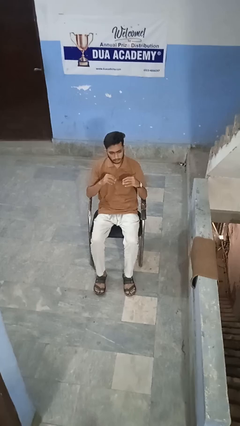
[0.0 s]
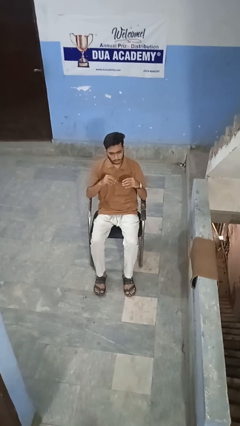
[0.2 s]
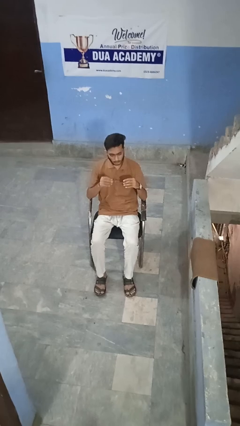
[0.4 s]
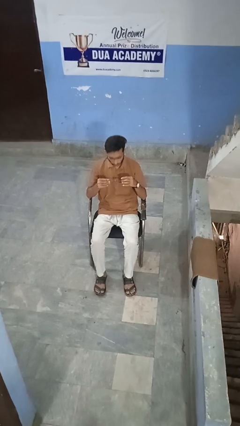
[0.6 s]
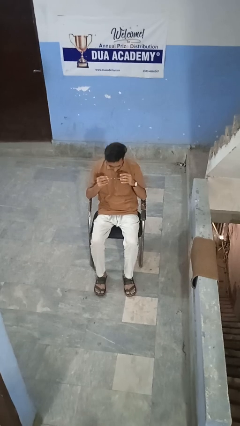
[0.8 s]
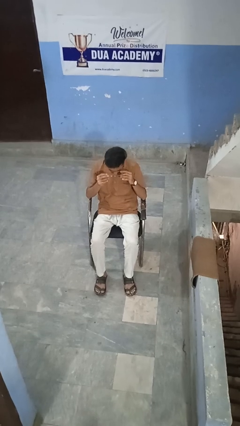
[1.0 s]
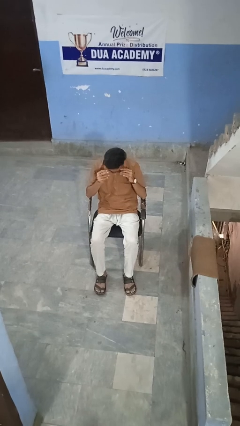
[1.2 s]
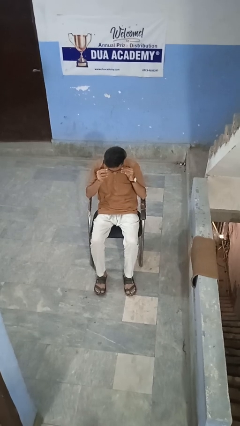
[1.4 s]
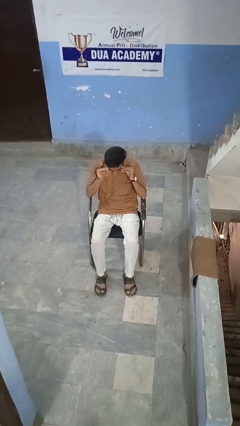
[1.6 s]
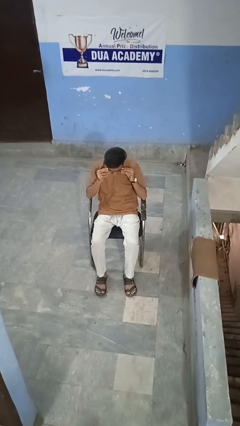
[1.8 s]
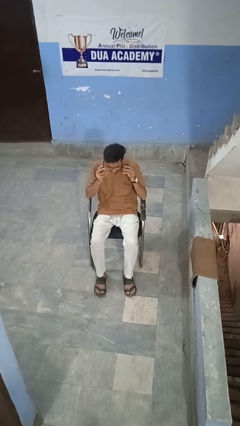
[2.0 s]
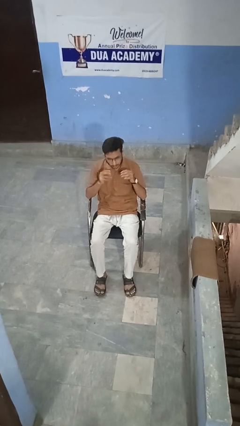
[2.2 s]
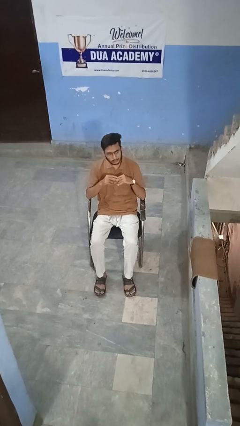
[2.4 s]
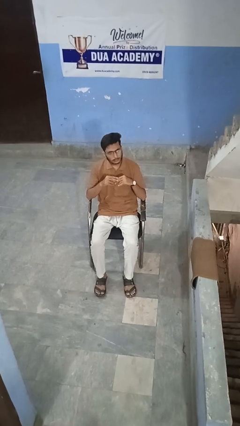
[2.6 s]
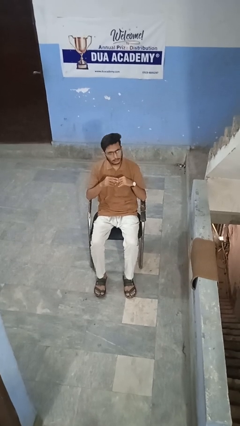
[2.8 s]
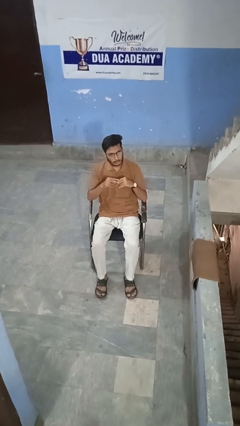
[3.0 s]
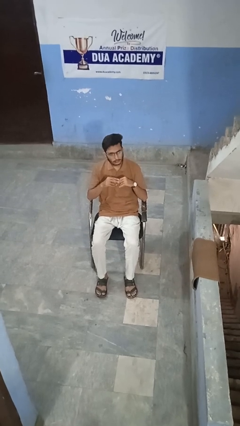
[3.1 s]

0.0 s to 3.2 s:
person puts on glasses

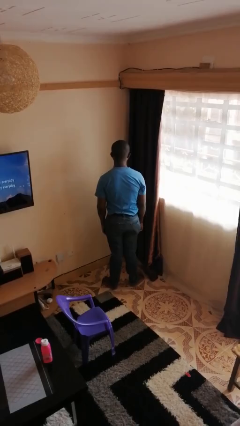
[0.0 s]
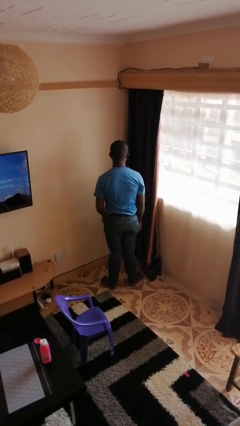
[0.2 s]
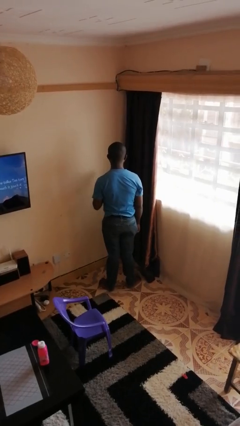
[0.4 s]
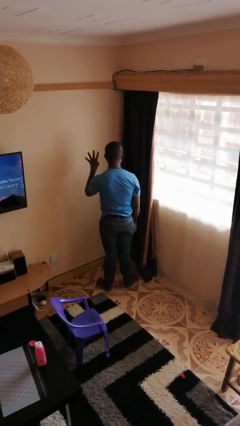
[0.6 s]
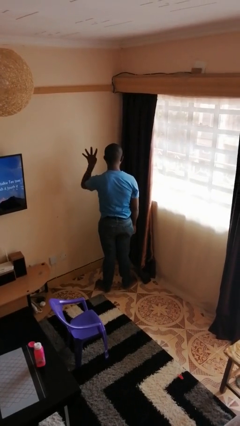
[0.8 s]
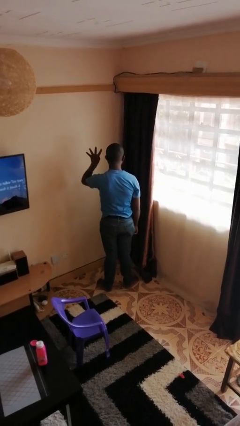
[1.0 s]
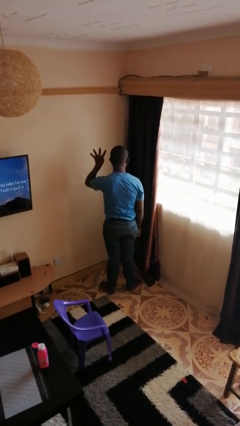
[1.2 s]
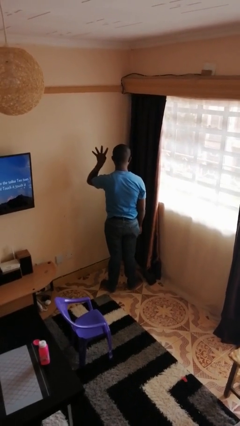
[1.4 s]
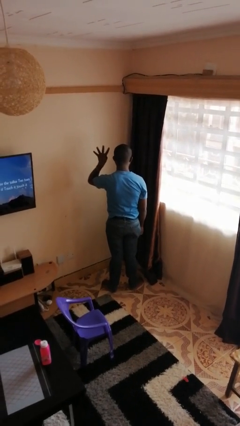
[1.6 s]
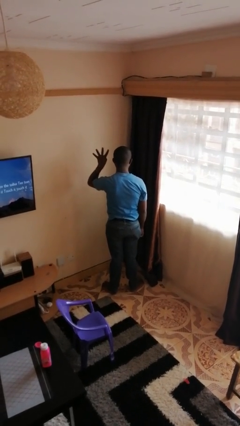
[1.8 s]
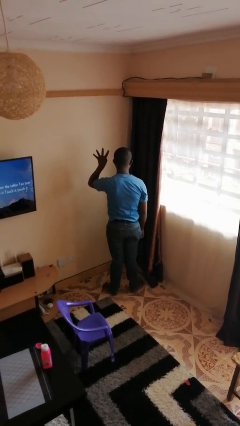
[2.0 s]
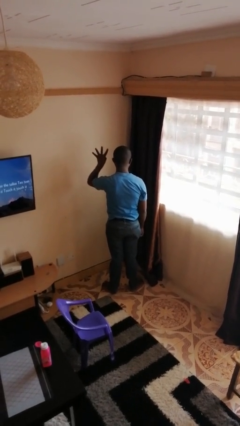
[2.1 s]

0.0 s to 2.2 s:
person gestures number four

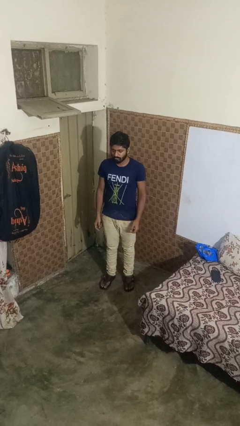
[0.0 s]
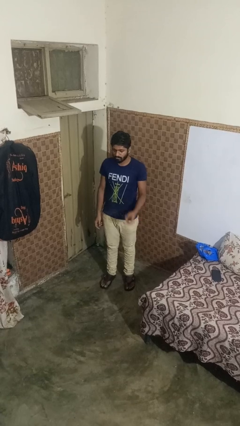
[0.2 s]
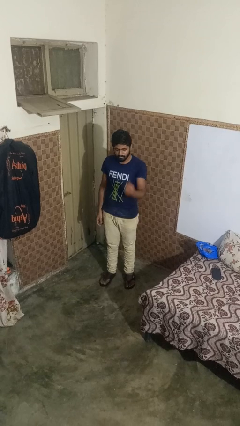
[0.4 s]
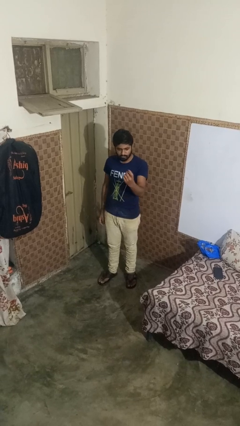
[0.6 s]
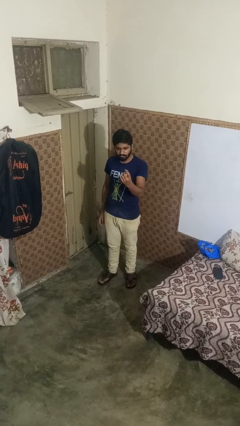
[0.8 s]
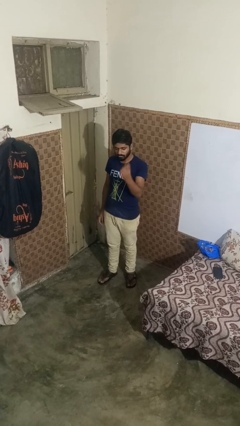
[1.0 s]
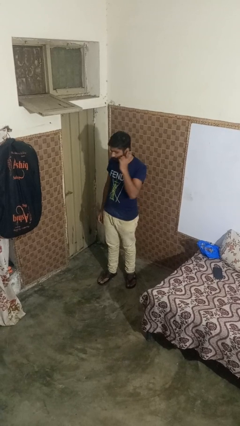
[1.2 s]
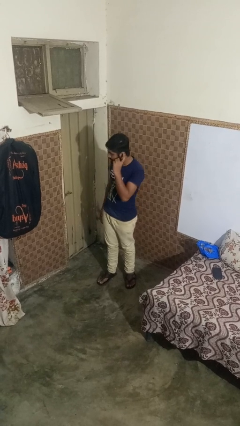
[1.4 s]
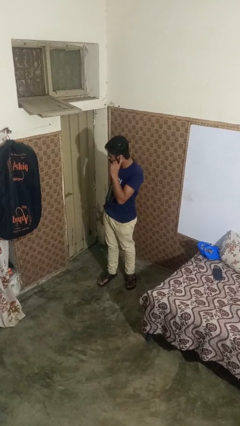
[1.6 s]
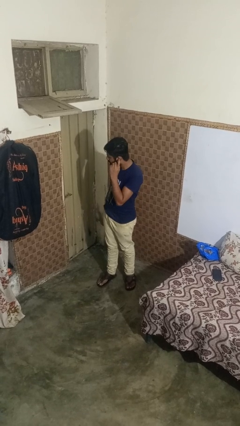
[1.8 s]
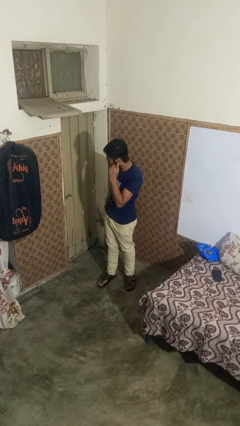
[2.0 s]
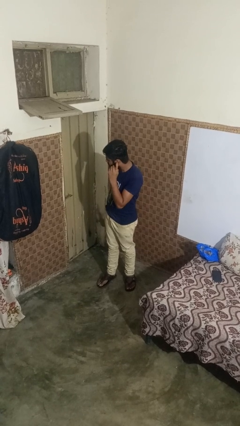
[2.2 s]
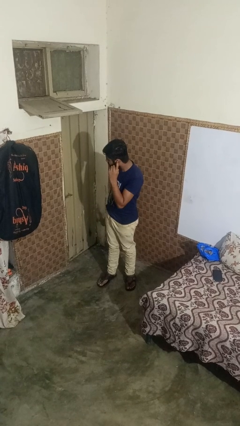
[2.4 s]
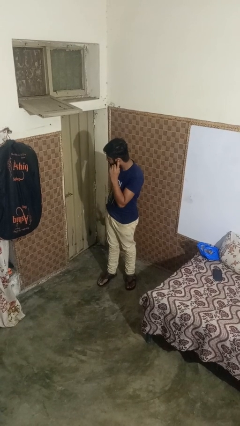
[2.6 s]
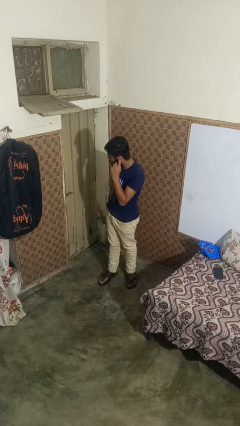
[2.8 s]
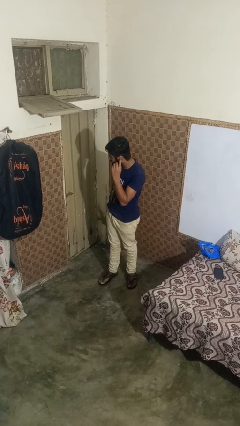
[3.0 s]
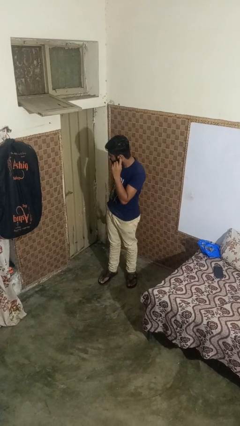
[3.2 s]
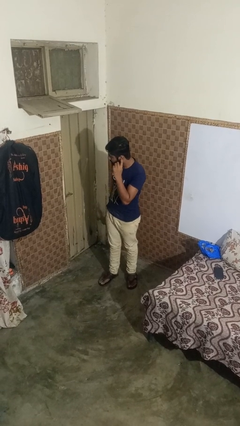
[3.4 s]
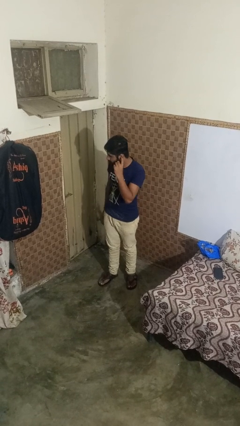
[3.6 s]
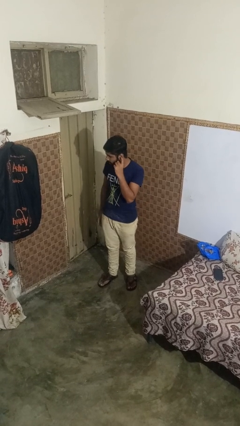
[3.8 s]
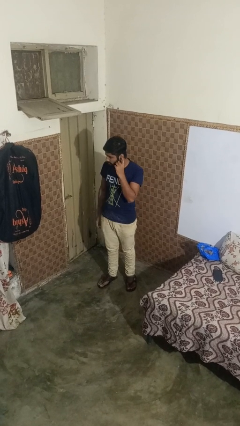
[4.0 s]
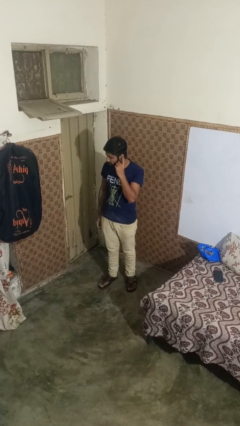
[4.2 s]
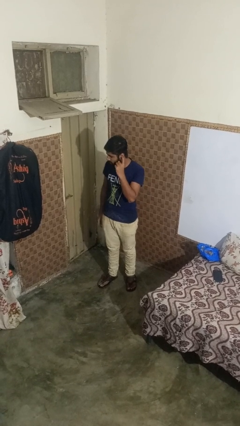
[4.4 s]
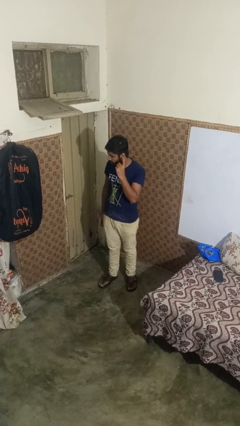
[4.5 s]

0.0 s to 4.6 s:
person gestures listen closely

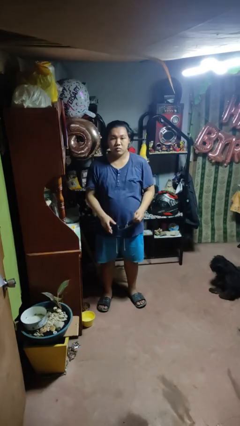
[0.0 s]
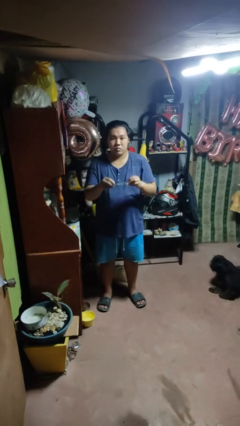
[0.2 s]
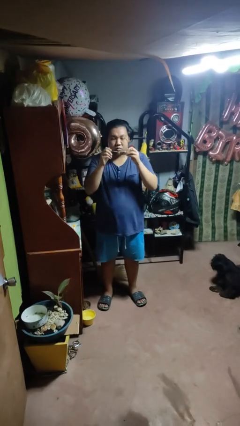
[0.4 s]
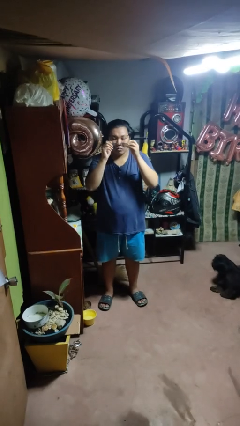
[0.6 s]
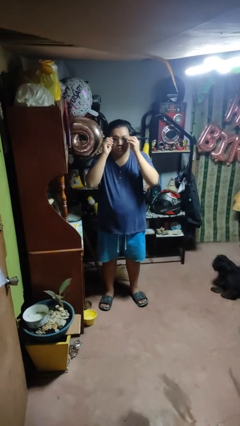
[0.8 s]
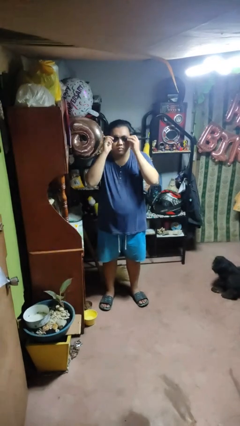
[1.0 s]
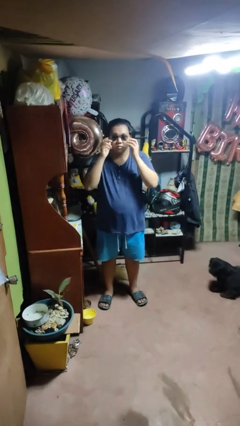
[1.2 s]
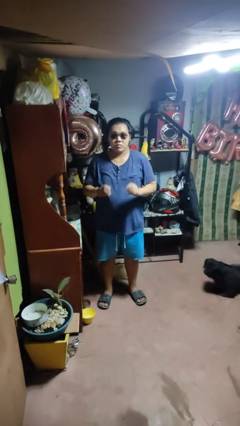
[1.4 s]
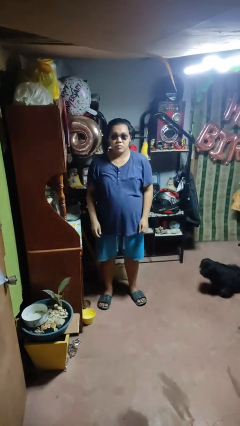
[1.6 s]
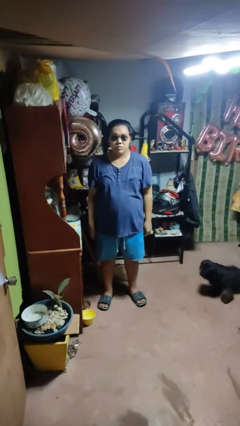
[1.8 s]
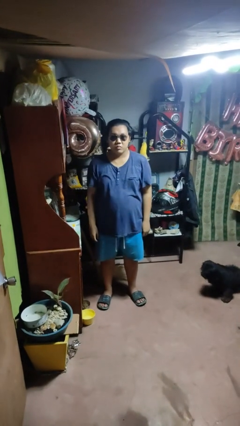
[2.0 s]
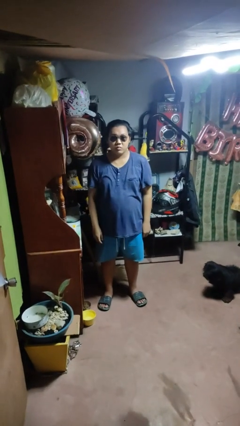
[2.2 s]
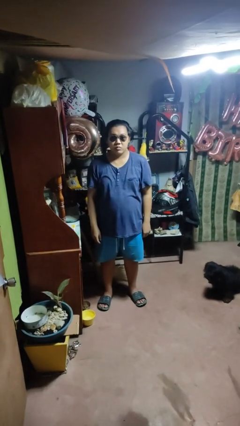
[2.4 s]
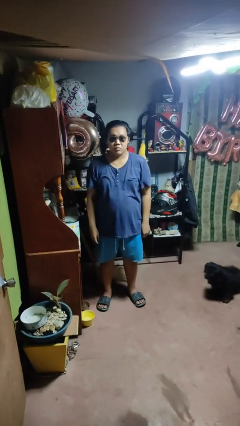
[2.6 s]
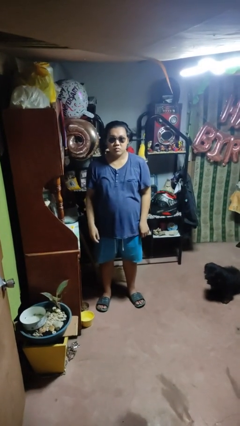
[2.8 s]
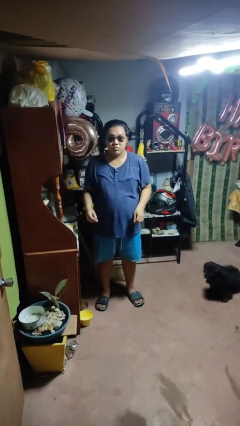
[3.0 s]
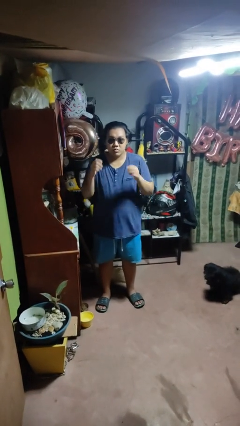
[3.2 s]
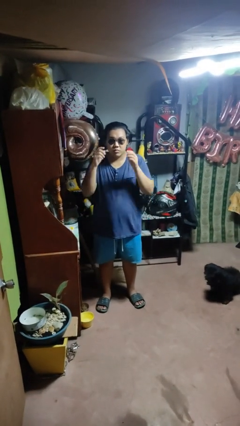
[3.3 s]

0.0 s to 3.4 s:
person puts on sunglasses

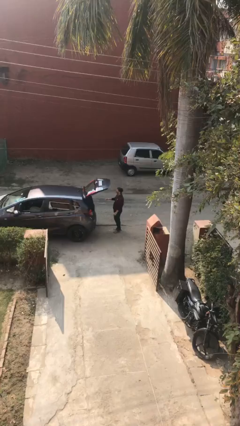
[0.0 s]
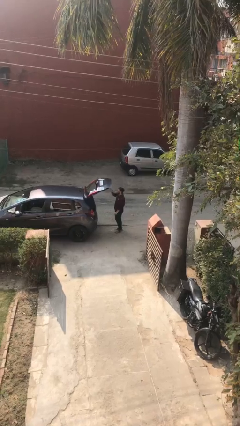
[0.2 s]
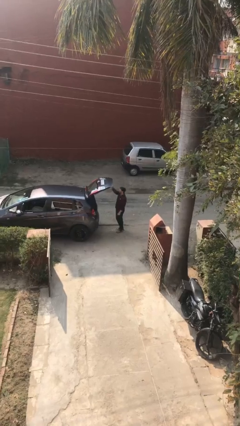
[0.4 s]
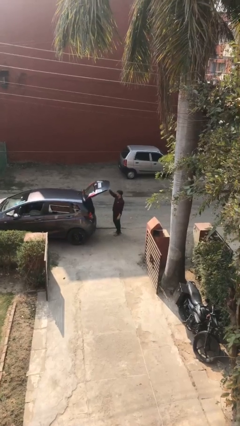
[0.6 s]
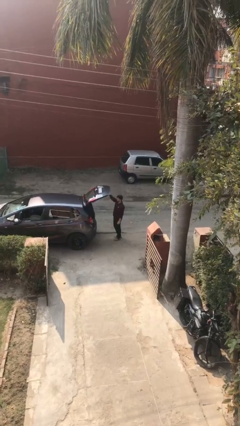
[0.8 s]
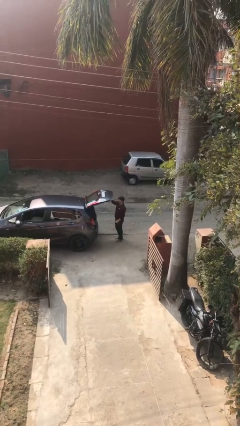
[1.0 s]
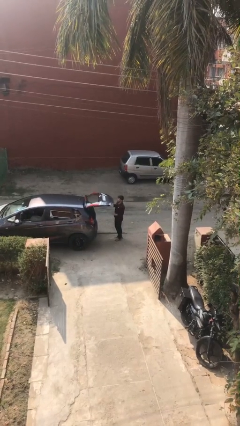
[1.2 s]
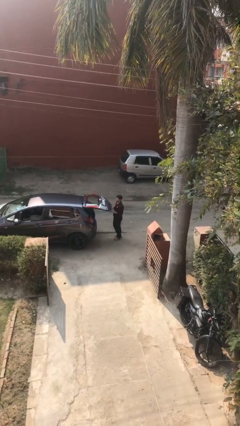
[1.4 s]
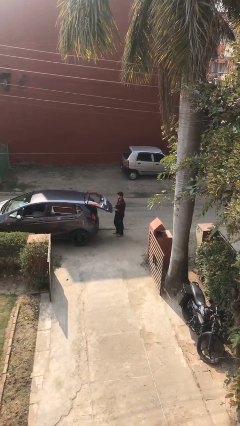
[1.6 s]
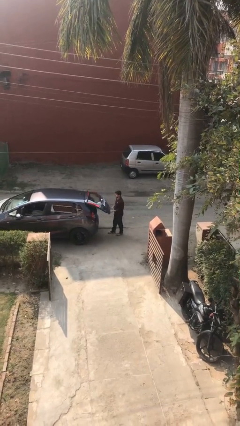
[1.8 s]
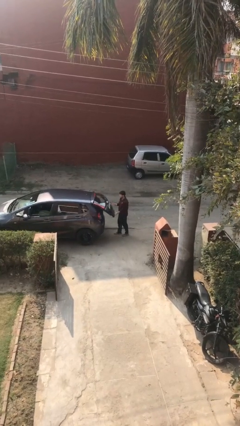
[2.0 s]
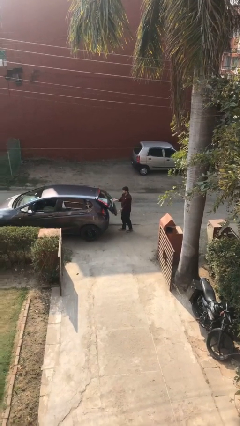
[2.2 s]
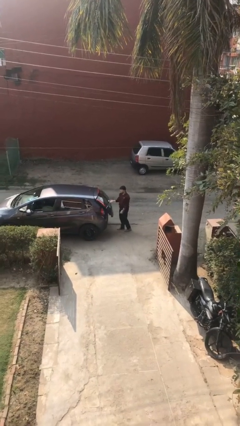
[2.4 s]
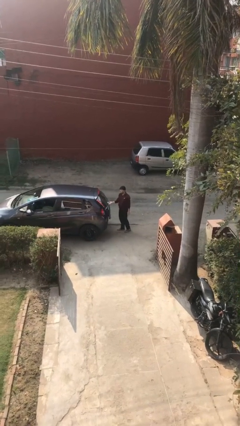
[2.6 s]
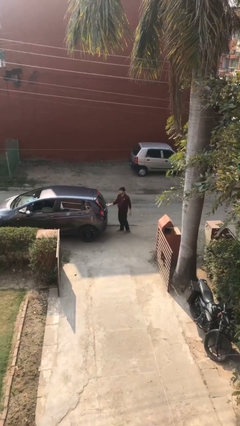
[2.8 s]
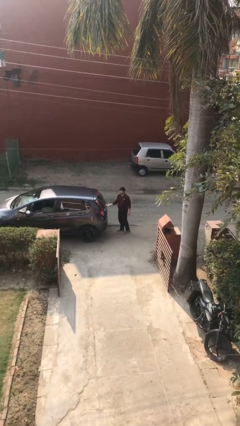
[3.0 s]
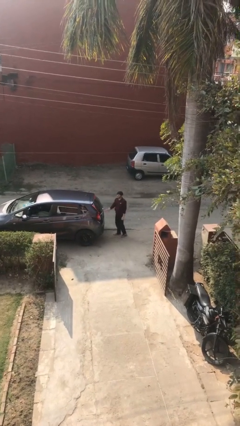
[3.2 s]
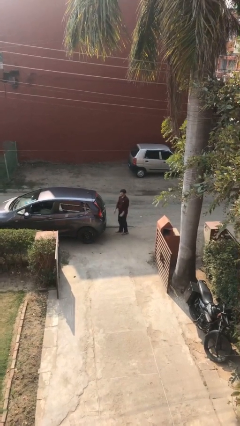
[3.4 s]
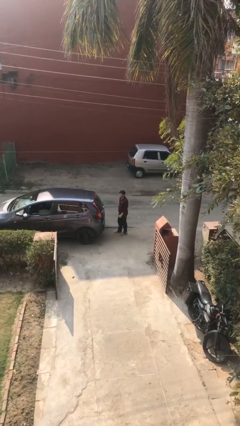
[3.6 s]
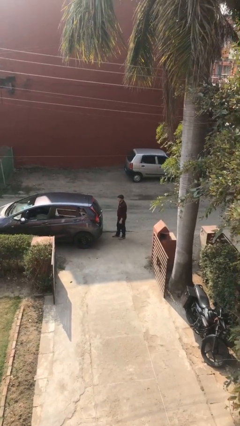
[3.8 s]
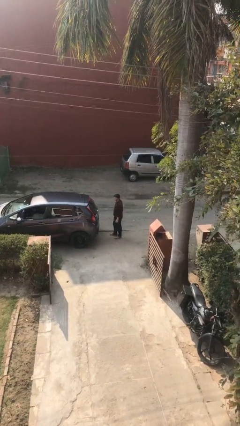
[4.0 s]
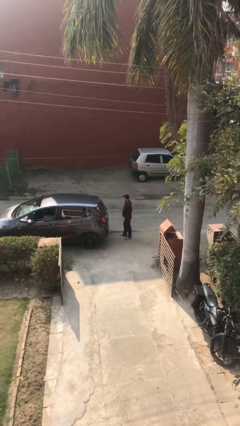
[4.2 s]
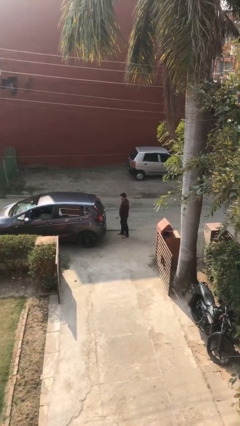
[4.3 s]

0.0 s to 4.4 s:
person closes car trunk

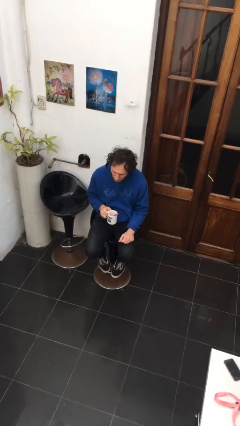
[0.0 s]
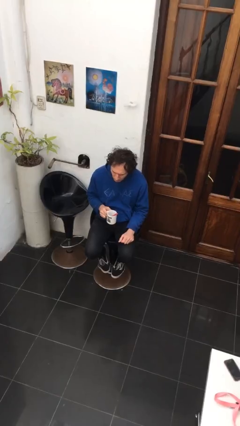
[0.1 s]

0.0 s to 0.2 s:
person drinks from mug
